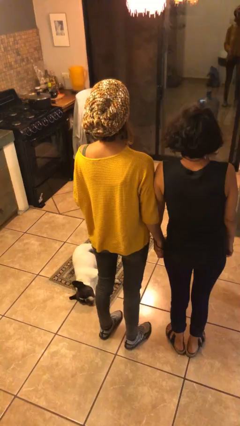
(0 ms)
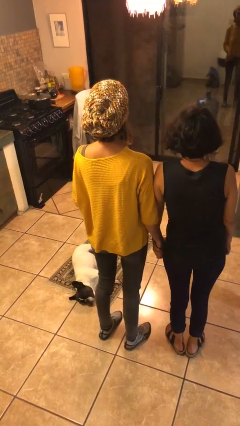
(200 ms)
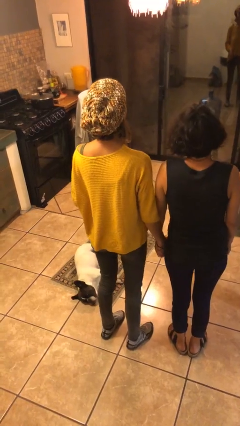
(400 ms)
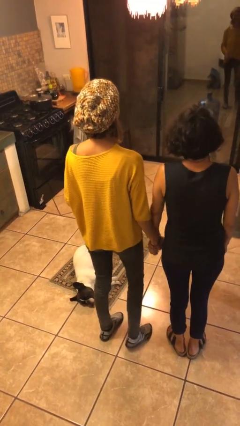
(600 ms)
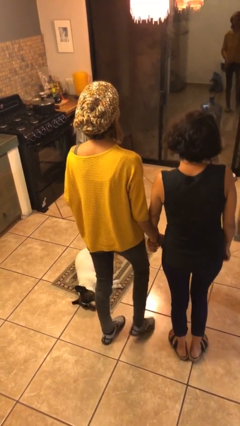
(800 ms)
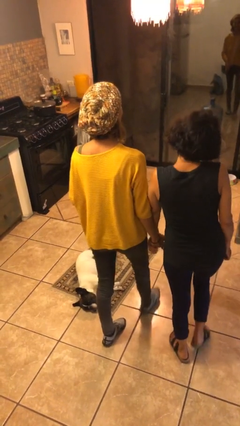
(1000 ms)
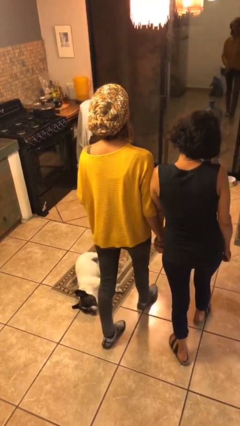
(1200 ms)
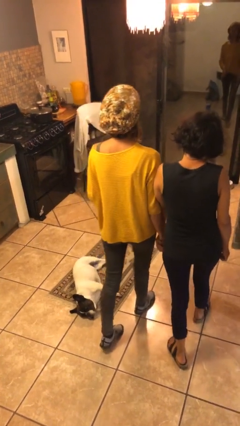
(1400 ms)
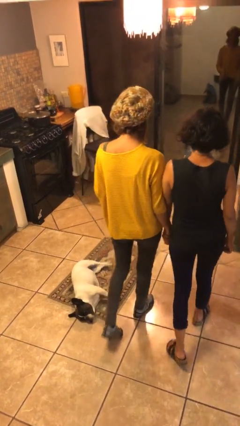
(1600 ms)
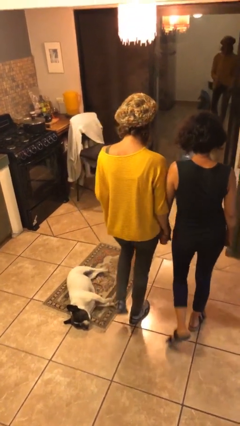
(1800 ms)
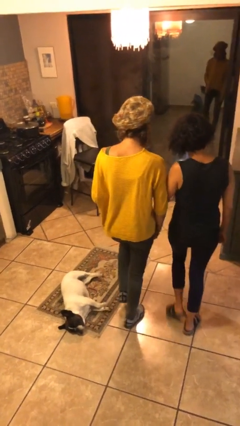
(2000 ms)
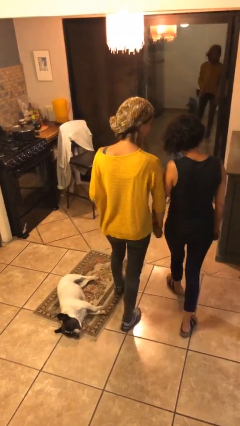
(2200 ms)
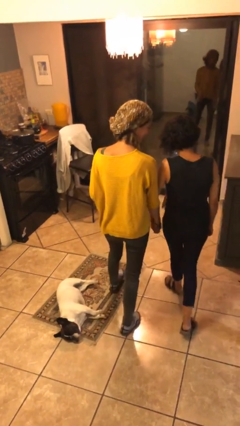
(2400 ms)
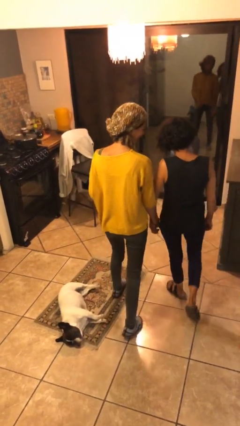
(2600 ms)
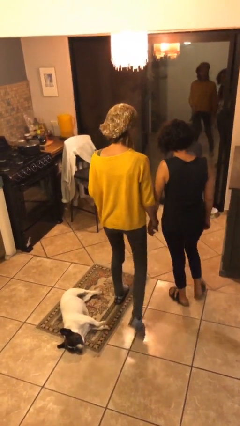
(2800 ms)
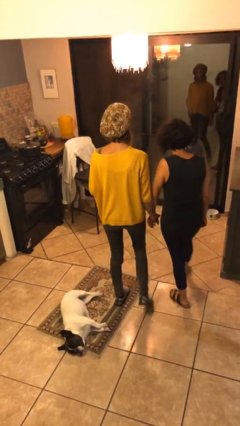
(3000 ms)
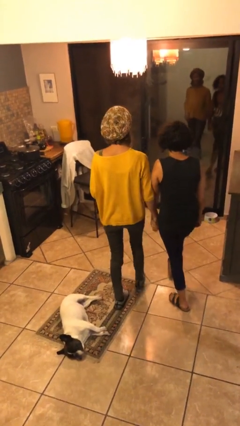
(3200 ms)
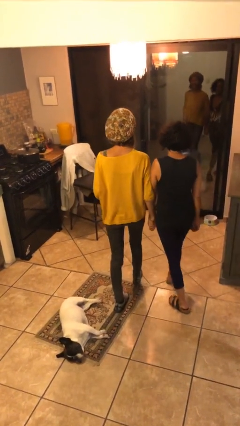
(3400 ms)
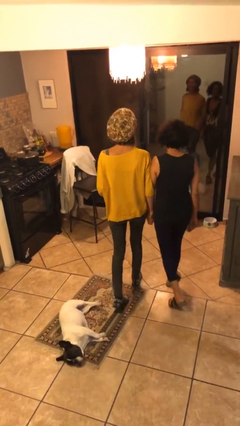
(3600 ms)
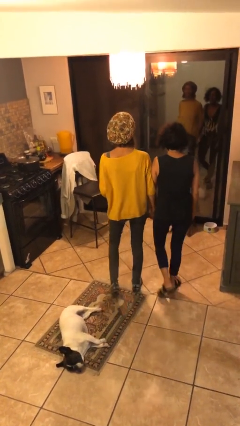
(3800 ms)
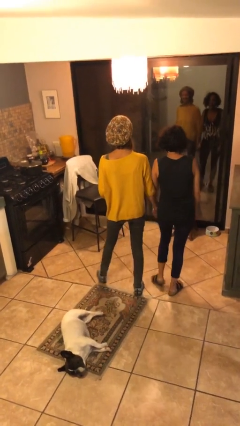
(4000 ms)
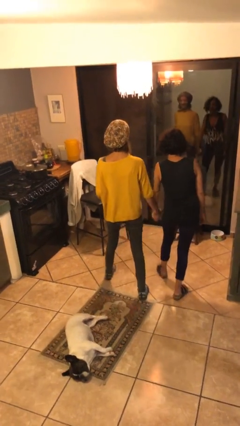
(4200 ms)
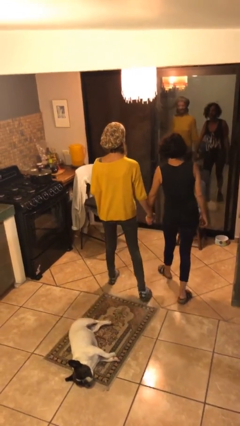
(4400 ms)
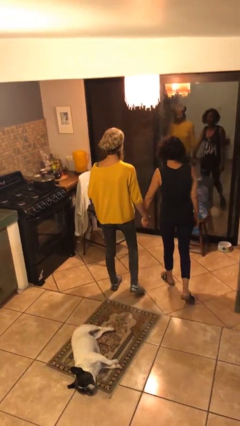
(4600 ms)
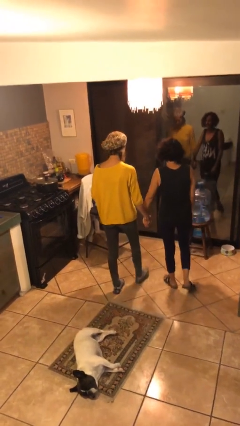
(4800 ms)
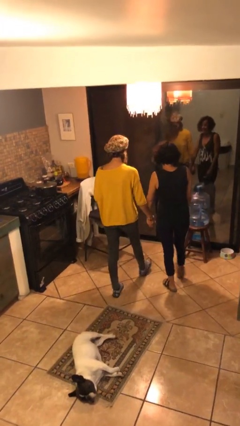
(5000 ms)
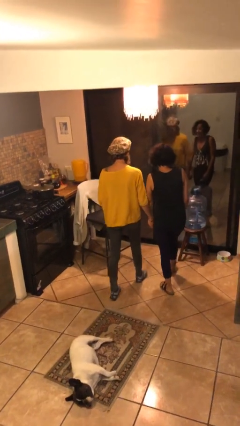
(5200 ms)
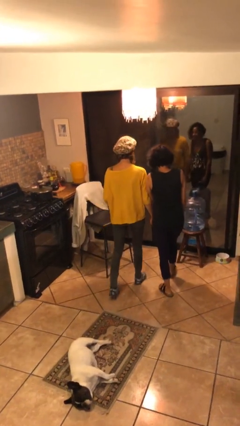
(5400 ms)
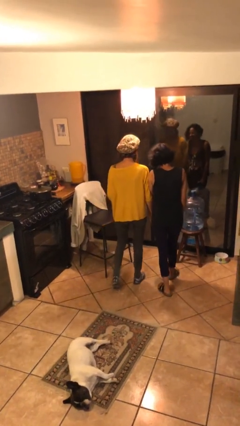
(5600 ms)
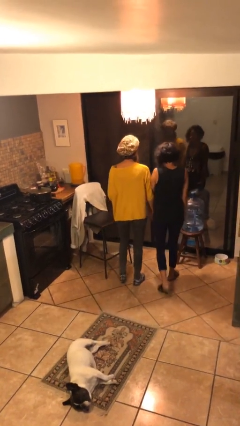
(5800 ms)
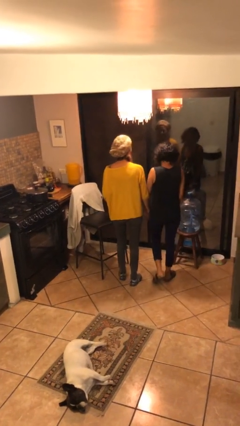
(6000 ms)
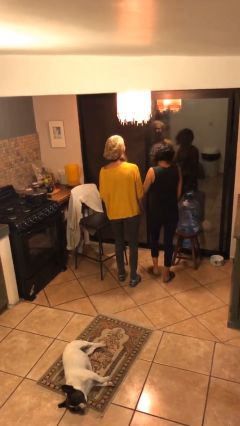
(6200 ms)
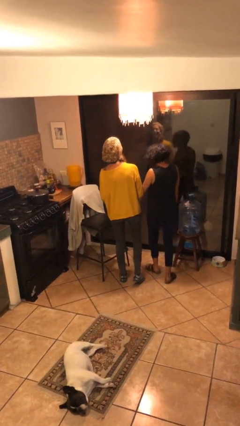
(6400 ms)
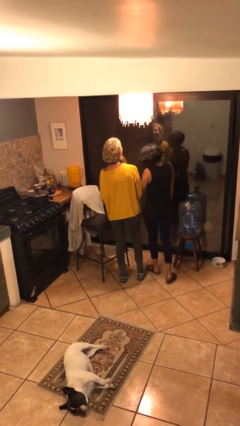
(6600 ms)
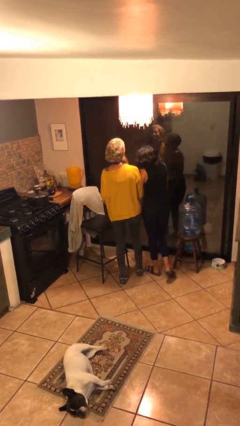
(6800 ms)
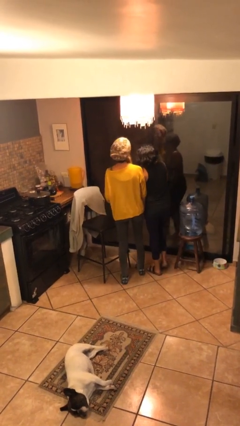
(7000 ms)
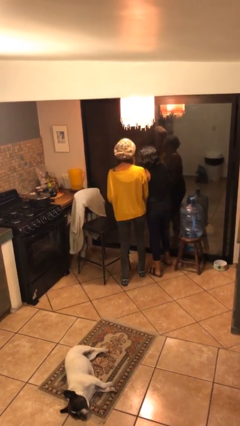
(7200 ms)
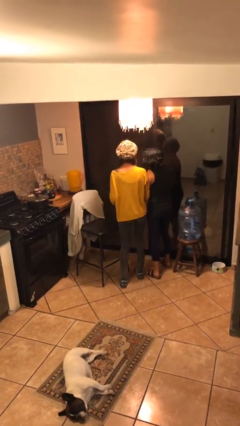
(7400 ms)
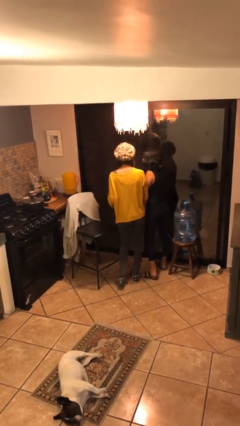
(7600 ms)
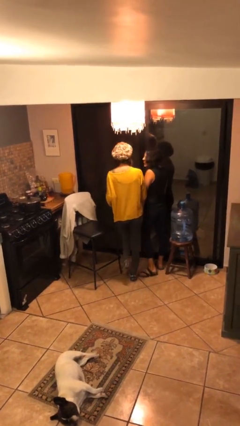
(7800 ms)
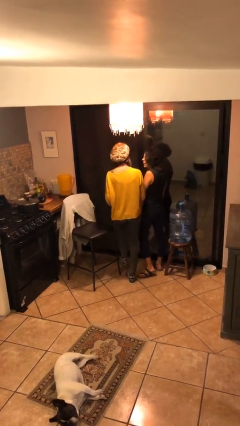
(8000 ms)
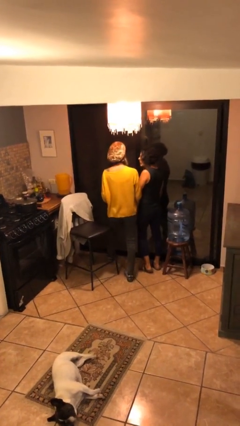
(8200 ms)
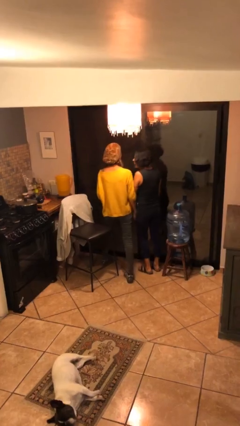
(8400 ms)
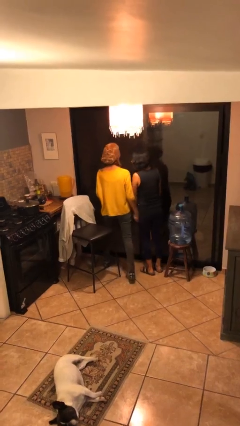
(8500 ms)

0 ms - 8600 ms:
person holds hand

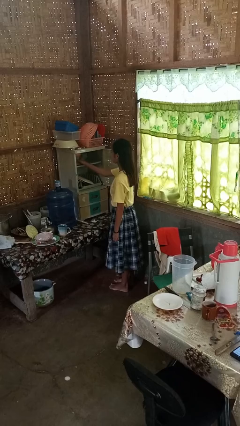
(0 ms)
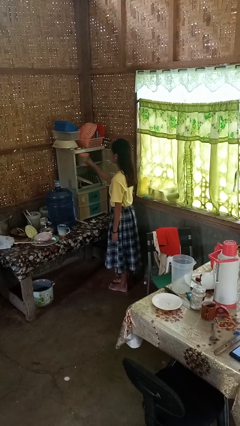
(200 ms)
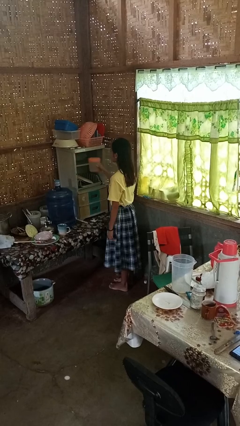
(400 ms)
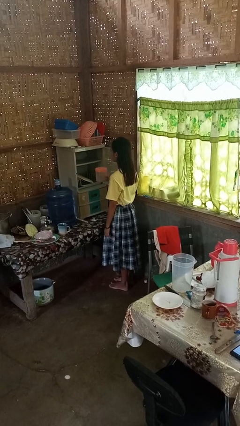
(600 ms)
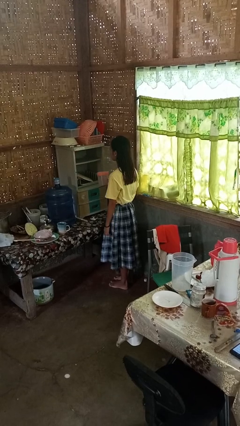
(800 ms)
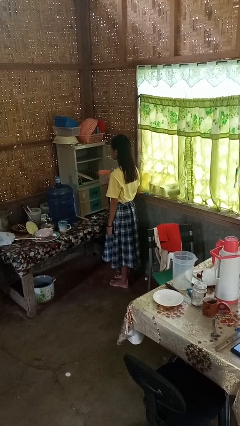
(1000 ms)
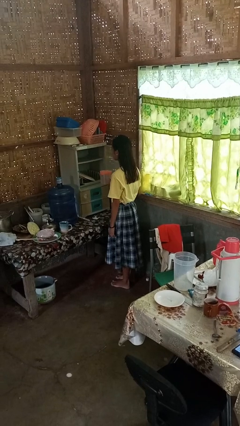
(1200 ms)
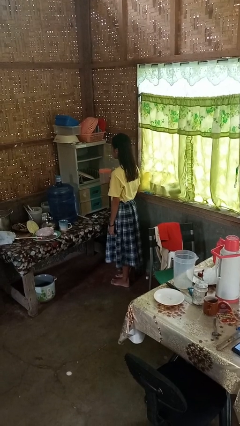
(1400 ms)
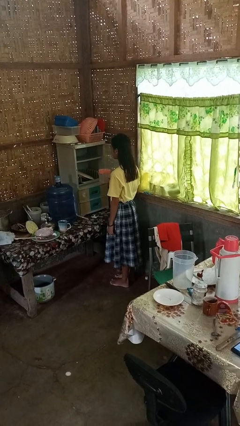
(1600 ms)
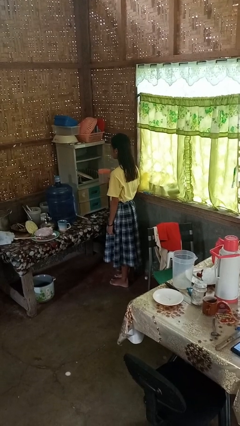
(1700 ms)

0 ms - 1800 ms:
person picks up object from cabinet

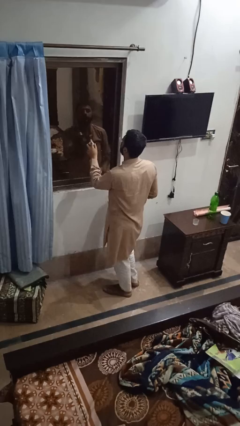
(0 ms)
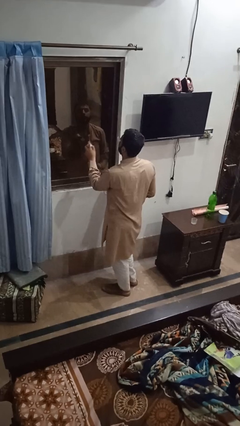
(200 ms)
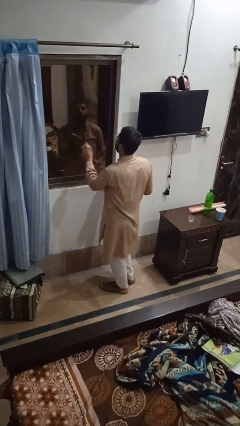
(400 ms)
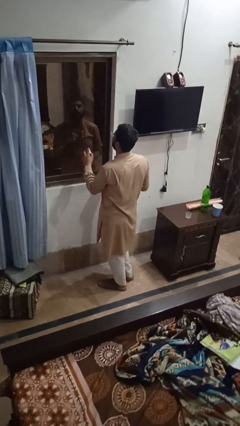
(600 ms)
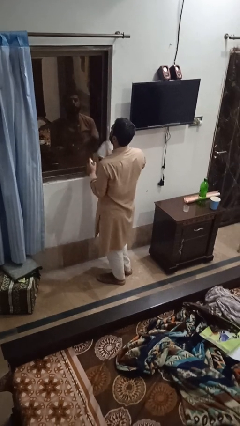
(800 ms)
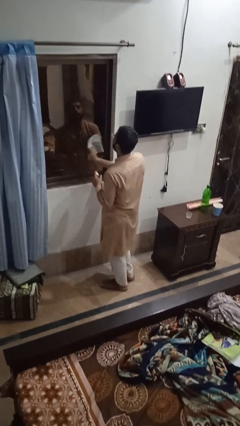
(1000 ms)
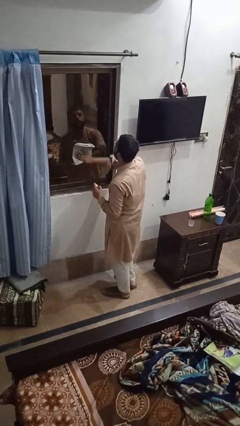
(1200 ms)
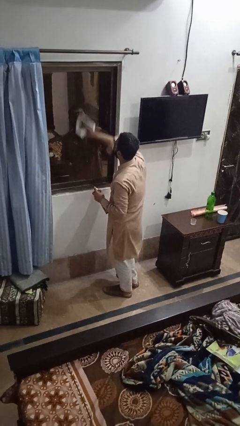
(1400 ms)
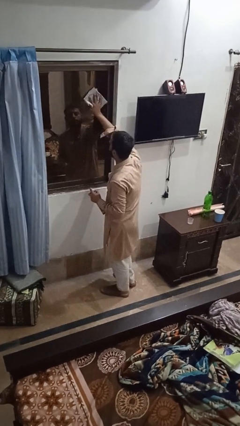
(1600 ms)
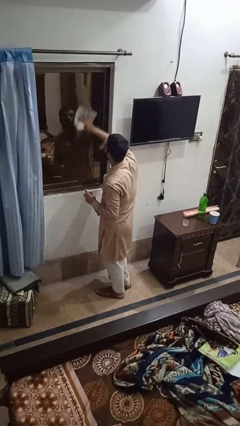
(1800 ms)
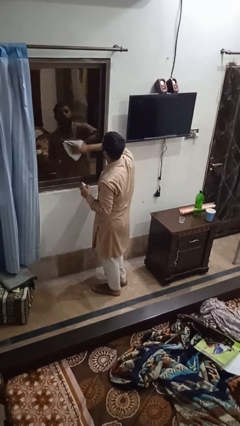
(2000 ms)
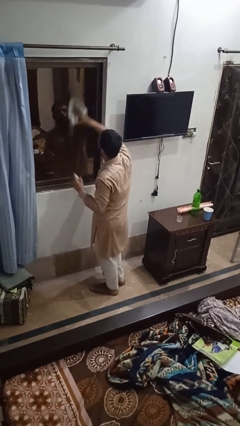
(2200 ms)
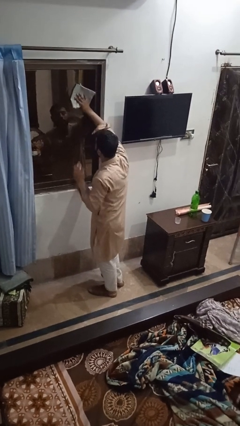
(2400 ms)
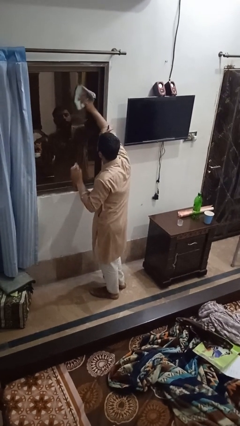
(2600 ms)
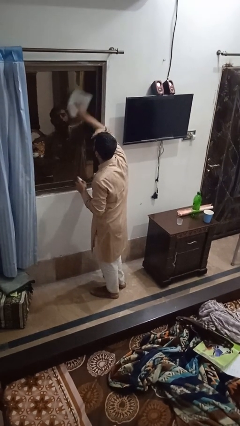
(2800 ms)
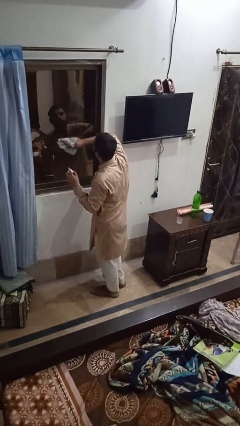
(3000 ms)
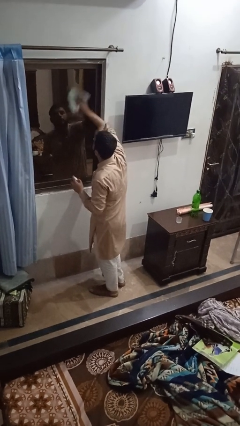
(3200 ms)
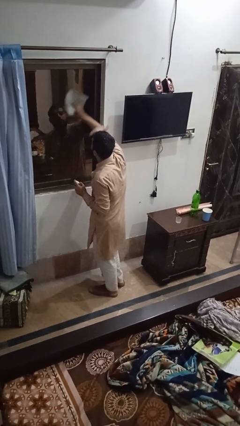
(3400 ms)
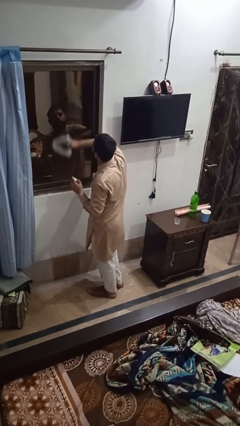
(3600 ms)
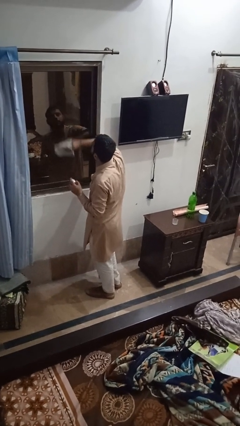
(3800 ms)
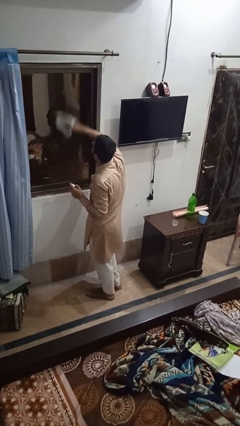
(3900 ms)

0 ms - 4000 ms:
person washes window

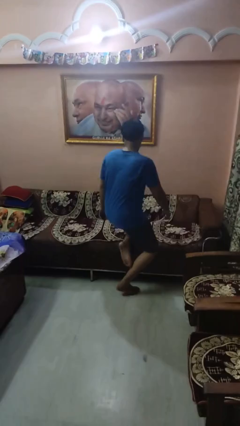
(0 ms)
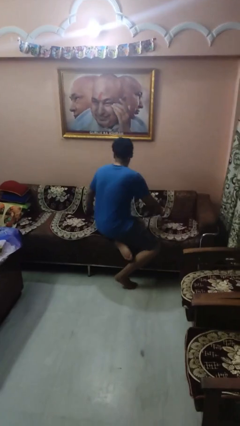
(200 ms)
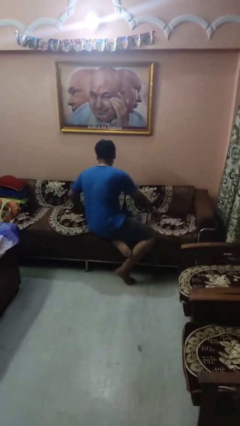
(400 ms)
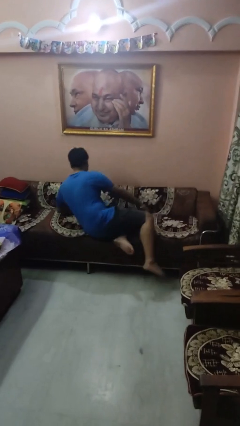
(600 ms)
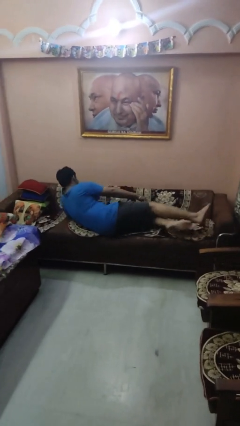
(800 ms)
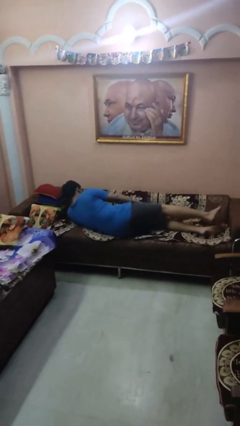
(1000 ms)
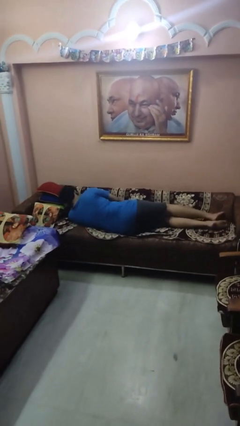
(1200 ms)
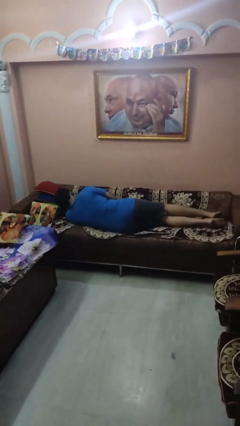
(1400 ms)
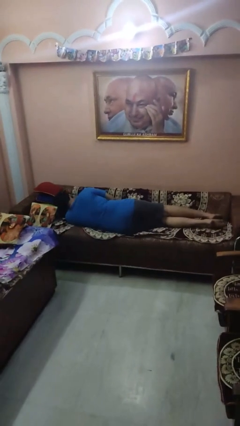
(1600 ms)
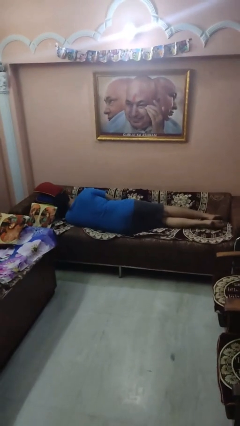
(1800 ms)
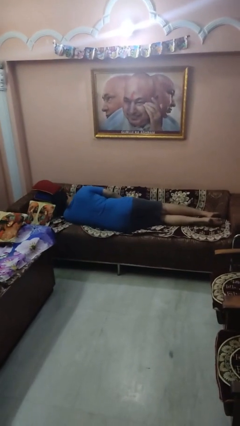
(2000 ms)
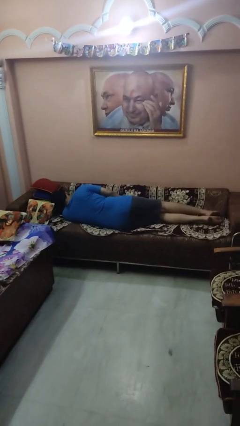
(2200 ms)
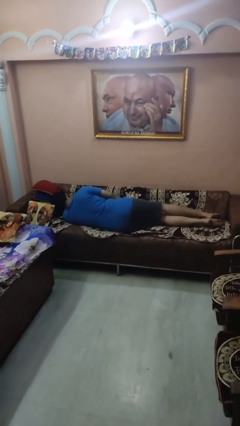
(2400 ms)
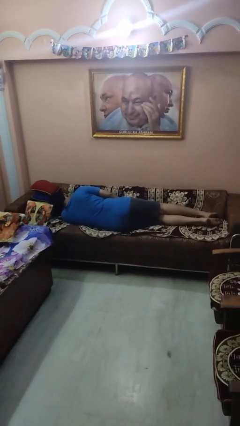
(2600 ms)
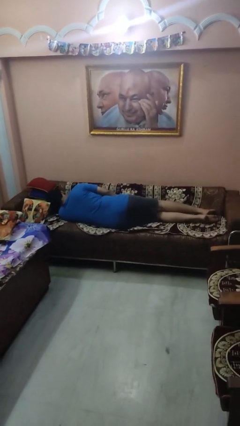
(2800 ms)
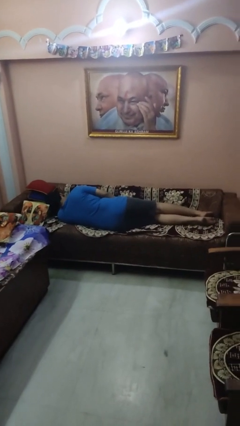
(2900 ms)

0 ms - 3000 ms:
person lies down on couch

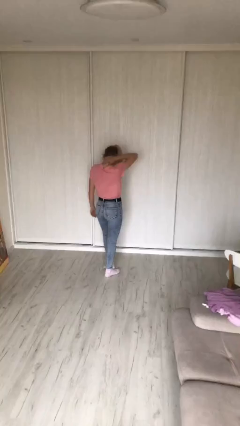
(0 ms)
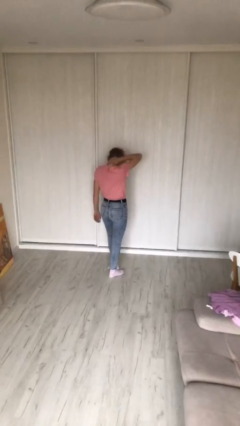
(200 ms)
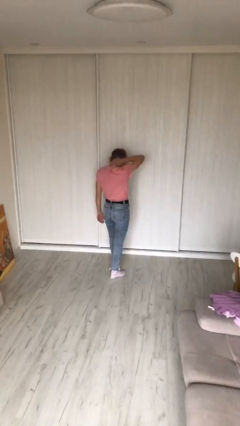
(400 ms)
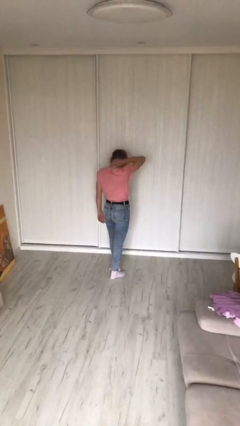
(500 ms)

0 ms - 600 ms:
person swats bug
